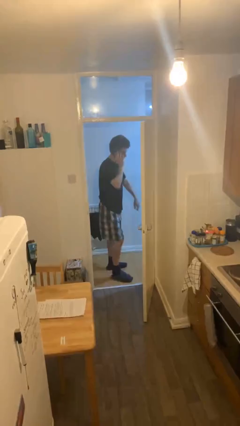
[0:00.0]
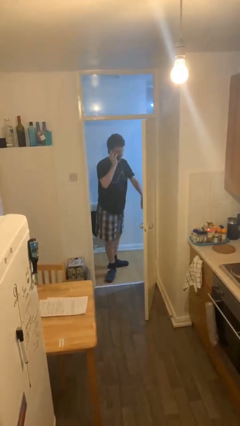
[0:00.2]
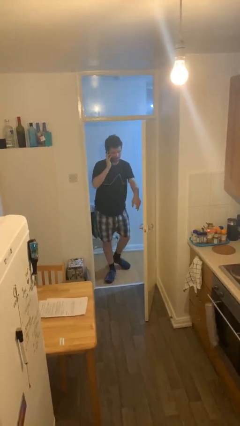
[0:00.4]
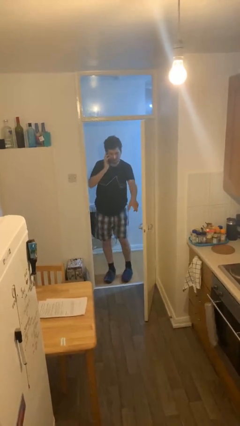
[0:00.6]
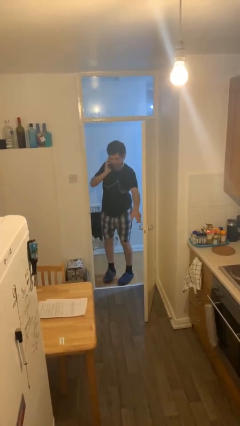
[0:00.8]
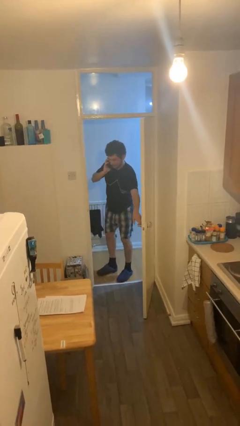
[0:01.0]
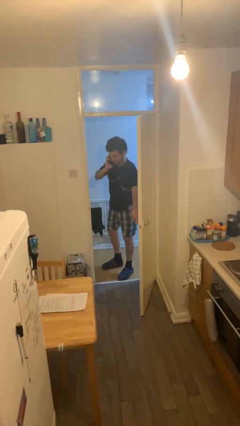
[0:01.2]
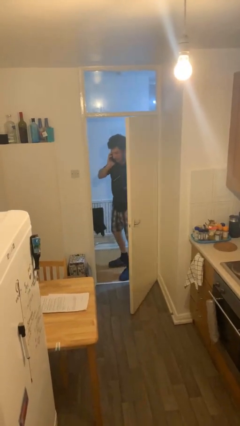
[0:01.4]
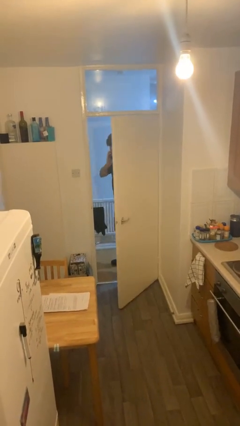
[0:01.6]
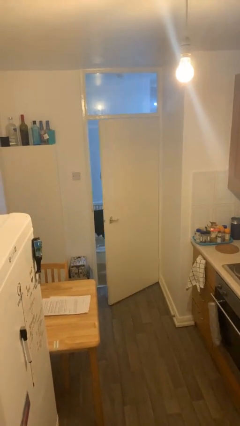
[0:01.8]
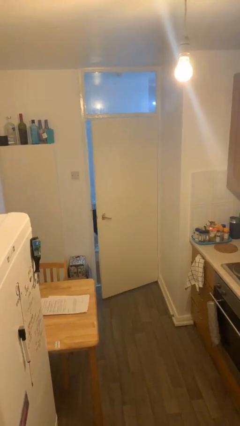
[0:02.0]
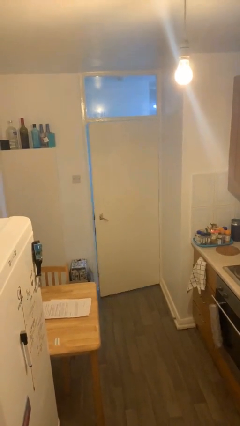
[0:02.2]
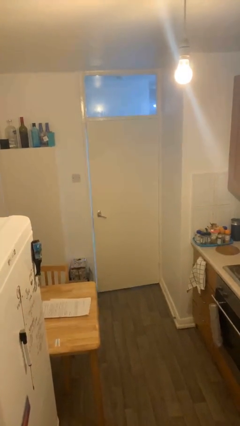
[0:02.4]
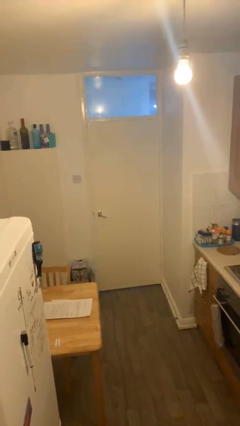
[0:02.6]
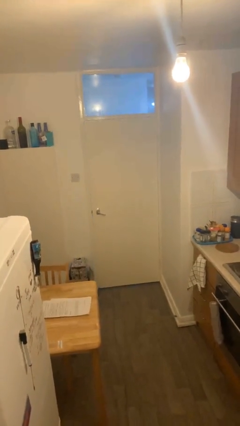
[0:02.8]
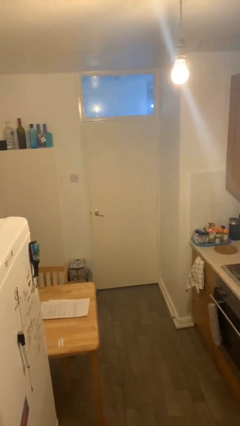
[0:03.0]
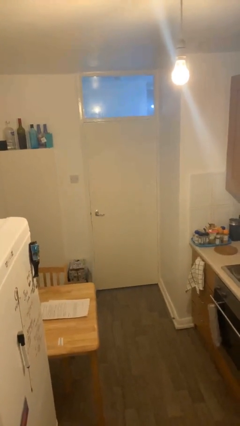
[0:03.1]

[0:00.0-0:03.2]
person closes facility door

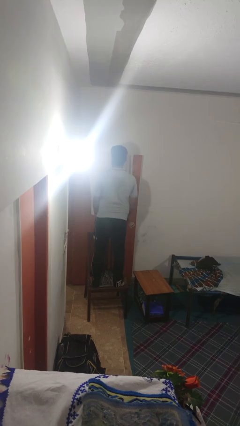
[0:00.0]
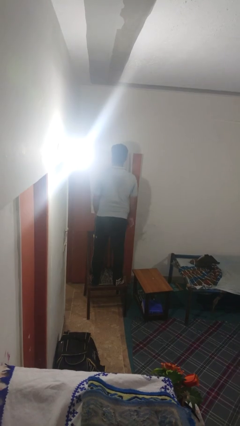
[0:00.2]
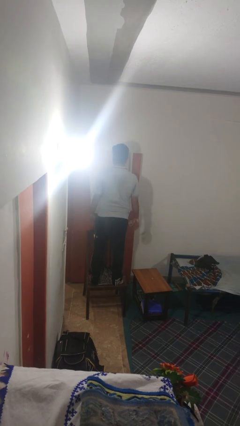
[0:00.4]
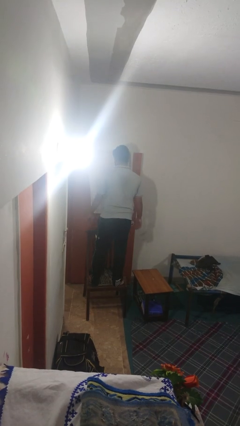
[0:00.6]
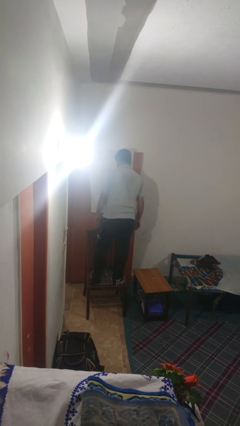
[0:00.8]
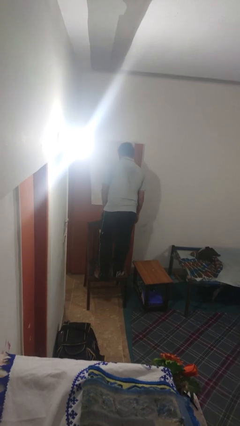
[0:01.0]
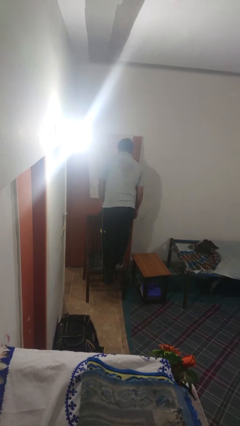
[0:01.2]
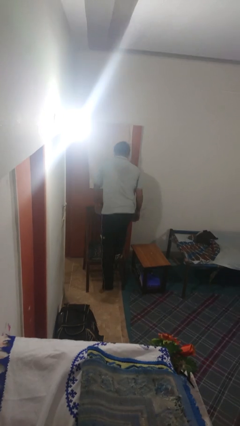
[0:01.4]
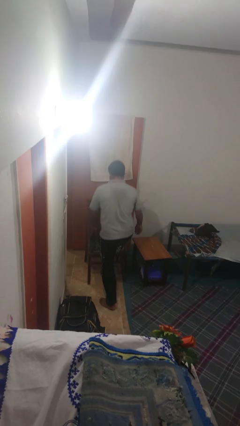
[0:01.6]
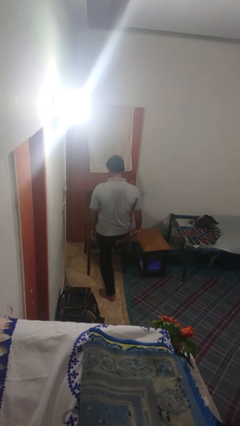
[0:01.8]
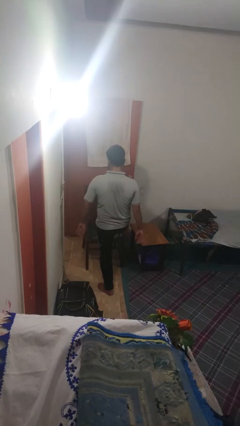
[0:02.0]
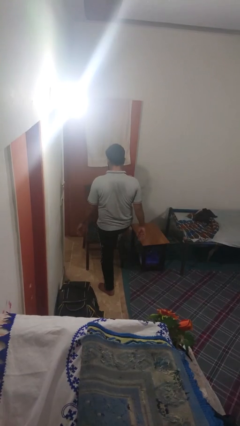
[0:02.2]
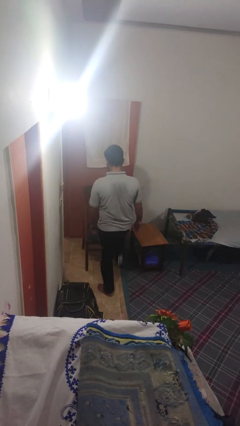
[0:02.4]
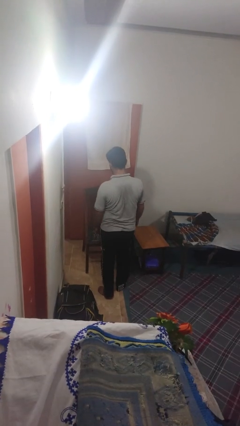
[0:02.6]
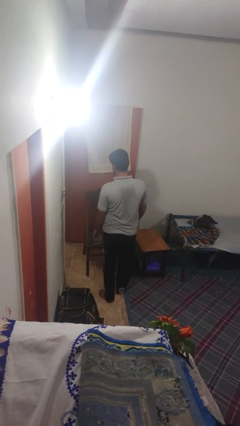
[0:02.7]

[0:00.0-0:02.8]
person climbs off chair

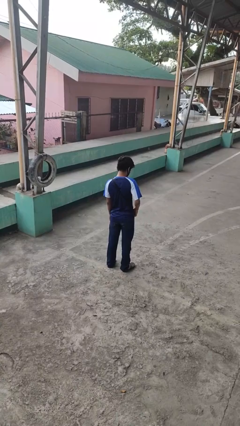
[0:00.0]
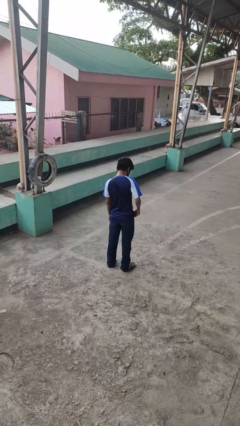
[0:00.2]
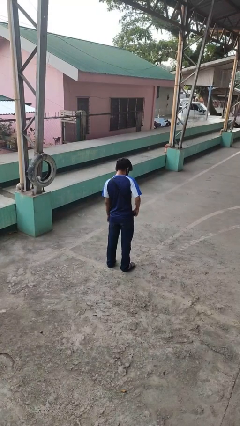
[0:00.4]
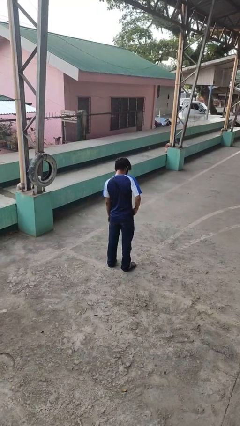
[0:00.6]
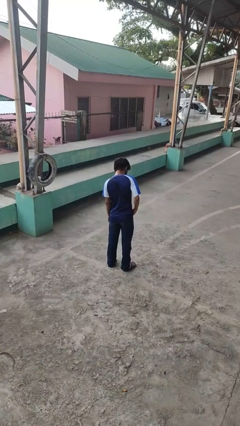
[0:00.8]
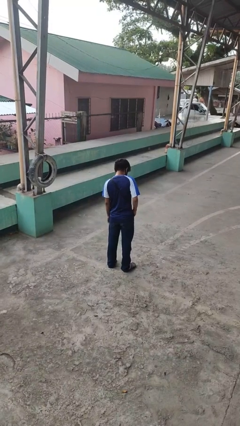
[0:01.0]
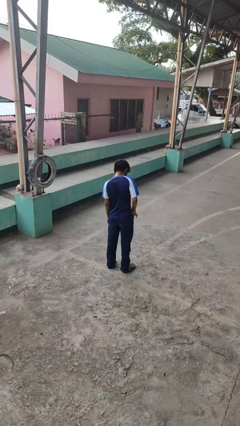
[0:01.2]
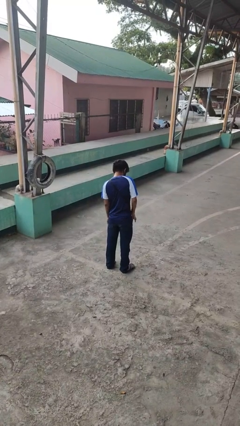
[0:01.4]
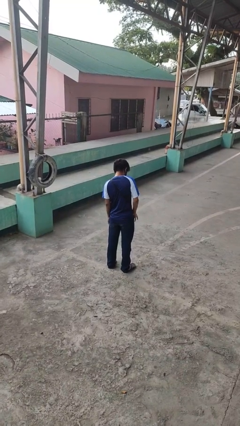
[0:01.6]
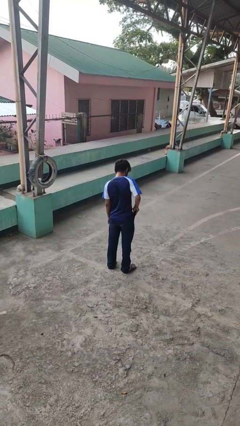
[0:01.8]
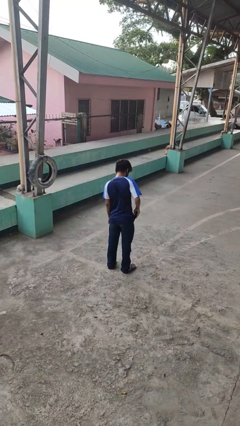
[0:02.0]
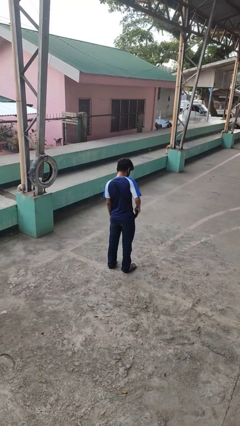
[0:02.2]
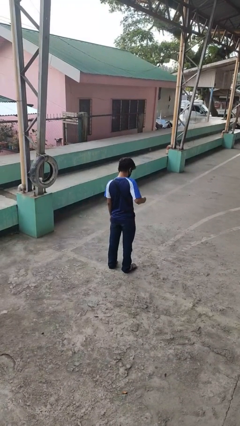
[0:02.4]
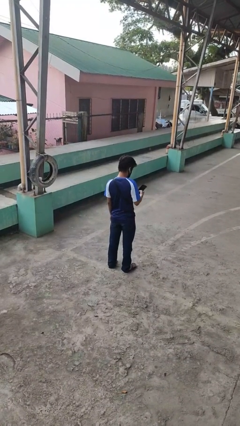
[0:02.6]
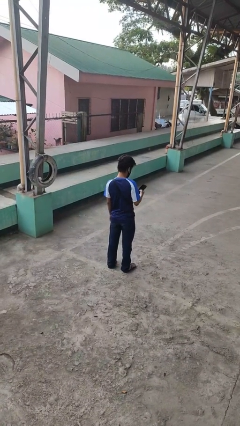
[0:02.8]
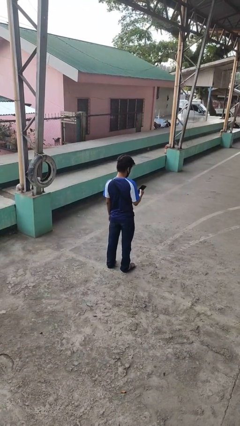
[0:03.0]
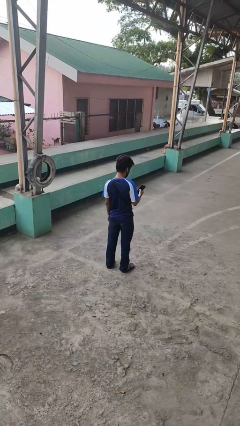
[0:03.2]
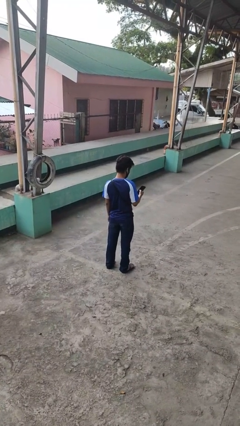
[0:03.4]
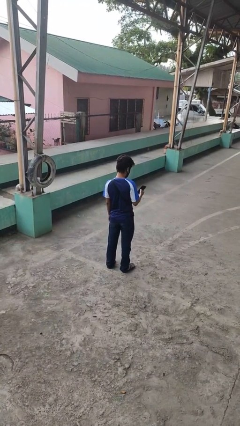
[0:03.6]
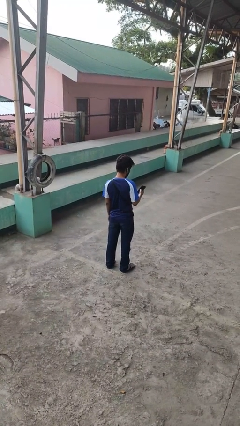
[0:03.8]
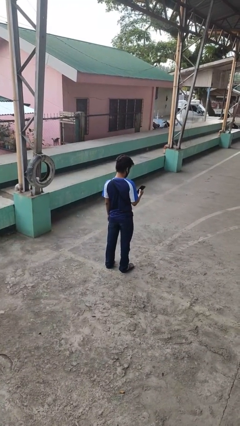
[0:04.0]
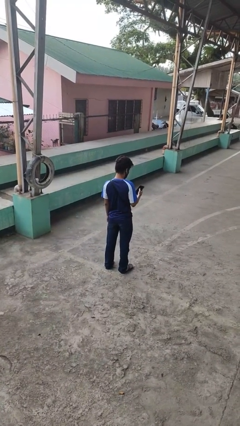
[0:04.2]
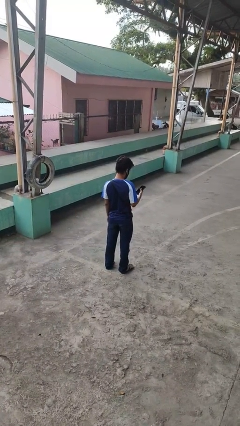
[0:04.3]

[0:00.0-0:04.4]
person takes phone from pocket

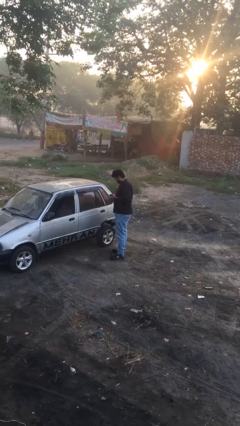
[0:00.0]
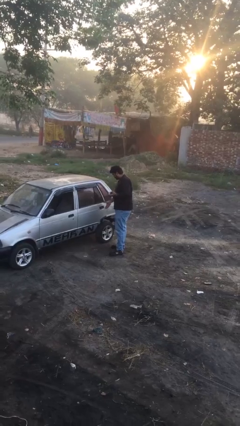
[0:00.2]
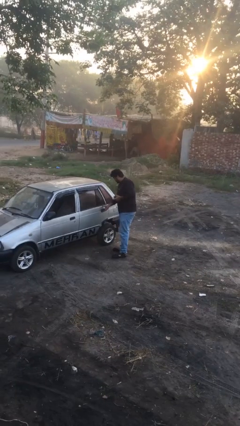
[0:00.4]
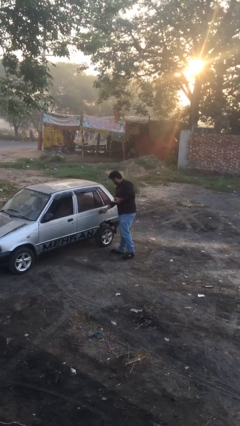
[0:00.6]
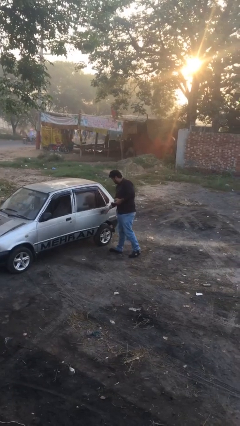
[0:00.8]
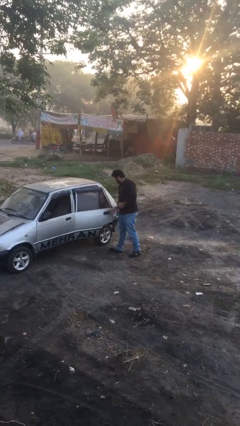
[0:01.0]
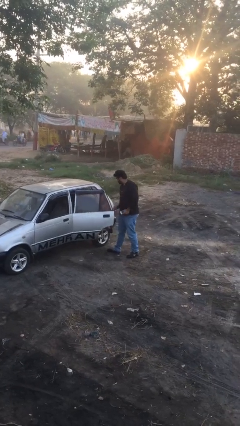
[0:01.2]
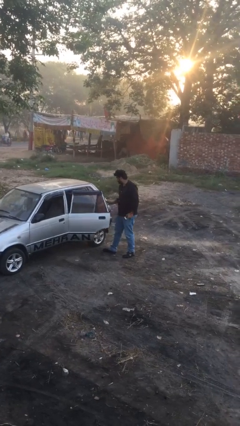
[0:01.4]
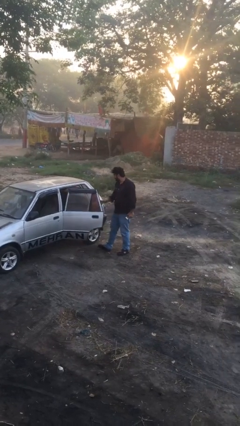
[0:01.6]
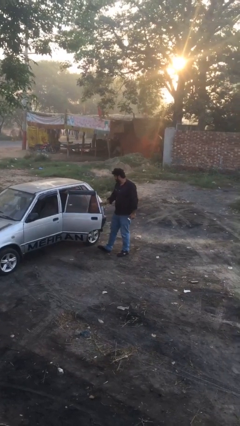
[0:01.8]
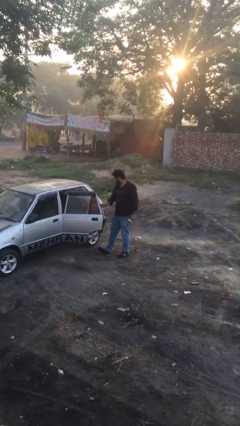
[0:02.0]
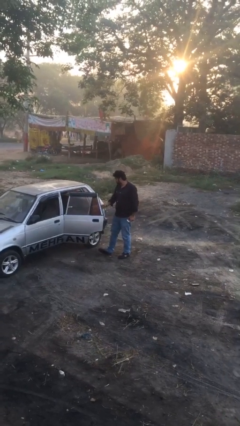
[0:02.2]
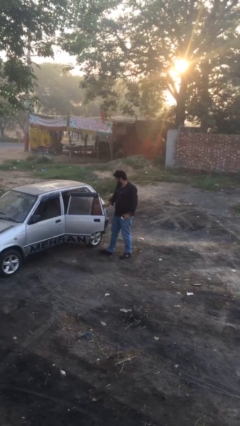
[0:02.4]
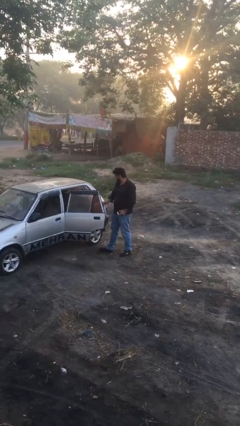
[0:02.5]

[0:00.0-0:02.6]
person opens car door

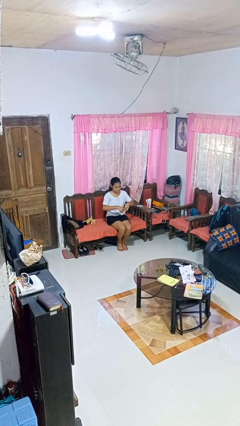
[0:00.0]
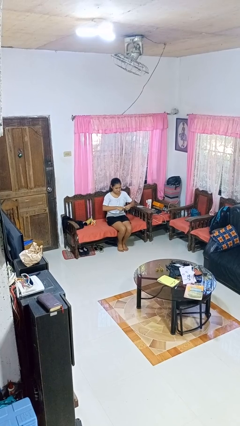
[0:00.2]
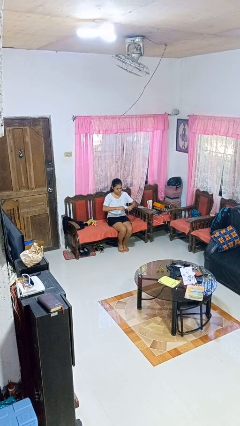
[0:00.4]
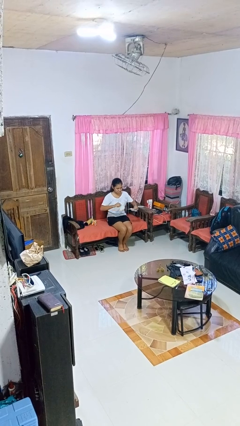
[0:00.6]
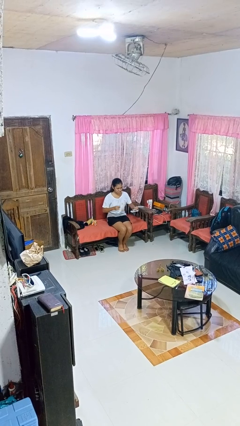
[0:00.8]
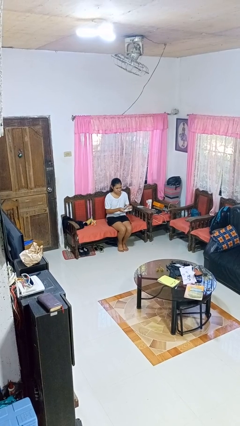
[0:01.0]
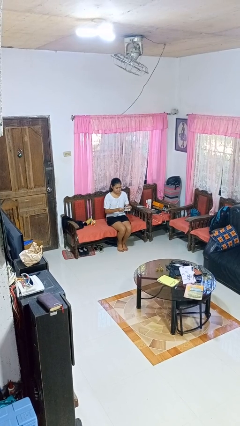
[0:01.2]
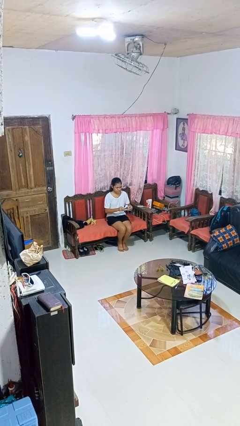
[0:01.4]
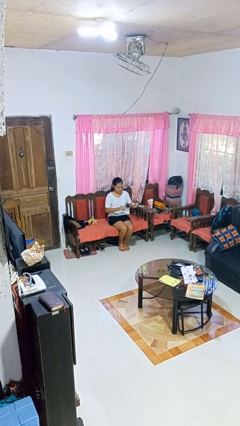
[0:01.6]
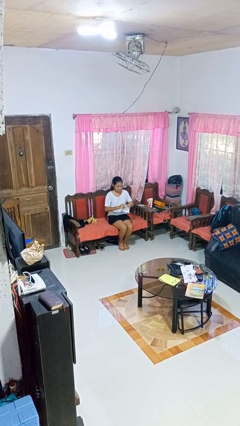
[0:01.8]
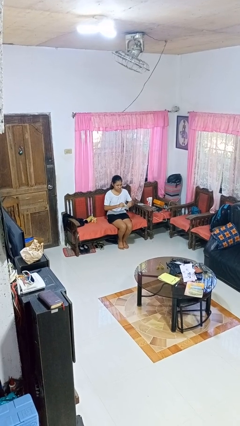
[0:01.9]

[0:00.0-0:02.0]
person tears paper

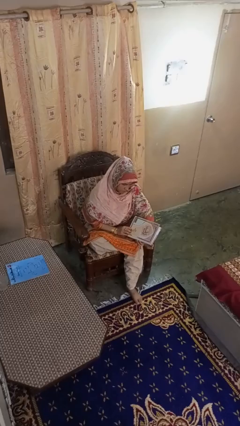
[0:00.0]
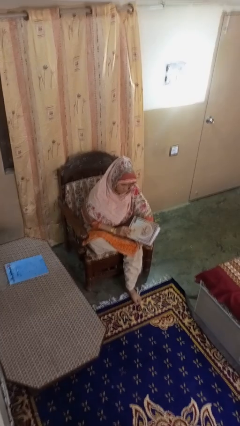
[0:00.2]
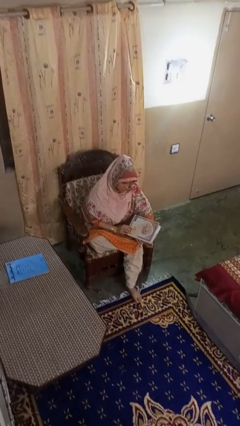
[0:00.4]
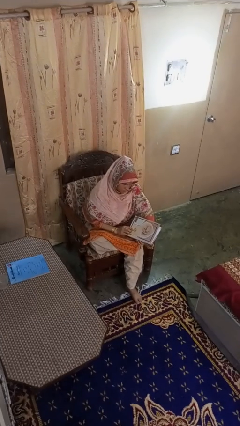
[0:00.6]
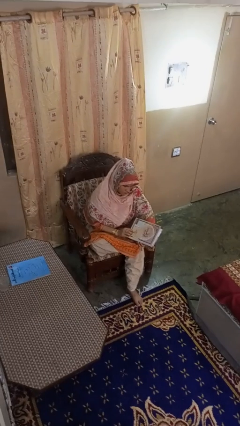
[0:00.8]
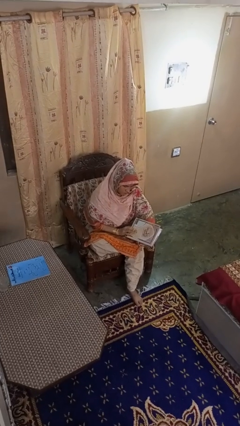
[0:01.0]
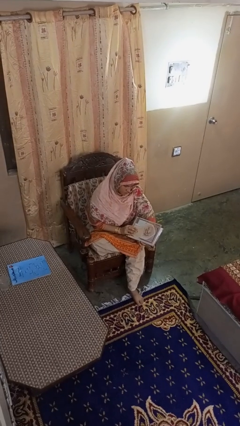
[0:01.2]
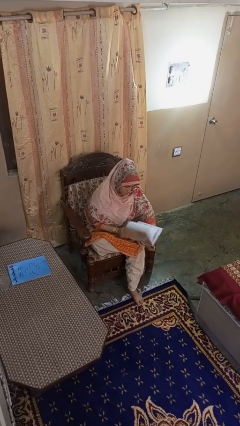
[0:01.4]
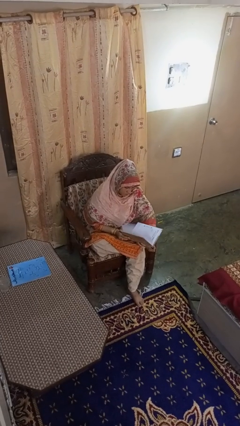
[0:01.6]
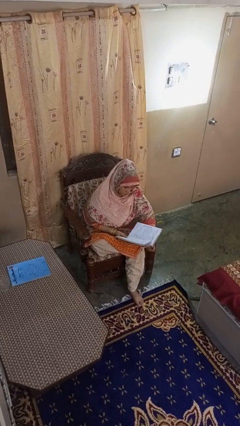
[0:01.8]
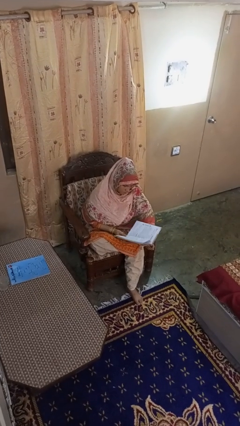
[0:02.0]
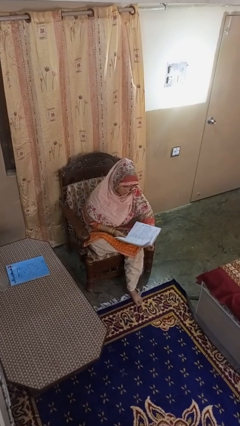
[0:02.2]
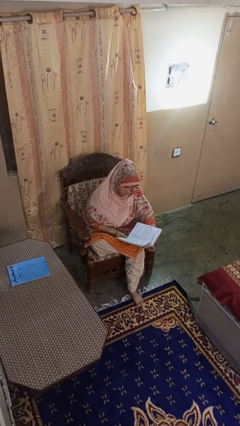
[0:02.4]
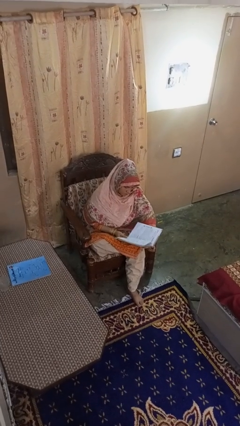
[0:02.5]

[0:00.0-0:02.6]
person reads book

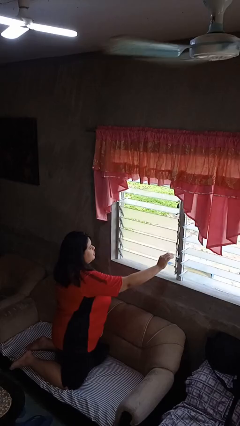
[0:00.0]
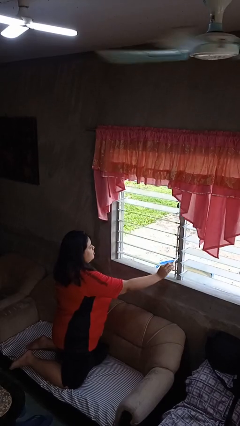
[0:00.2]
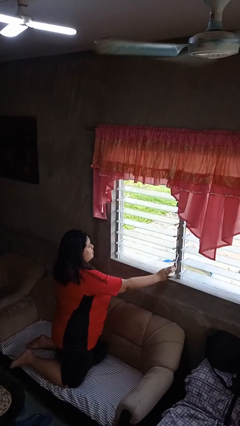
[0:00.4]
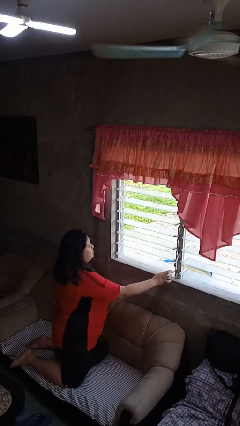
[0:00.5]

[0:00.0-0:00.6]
person opens home window
